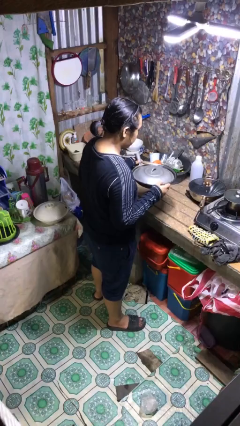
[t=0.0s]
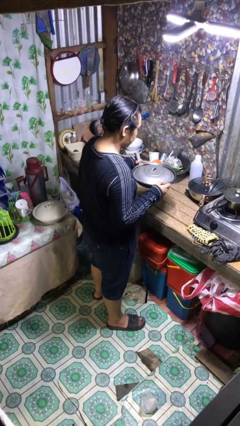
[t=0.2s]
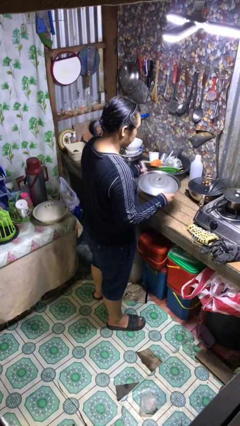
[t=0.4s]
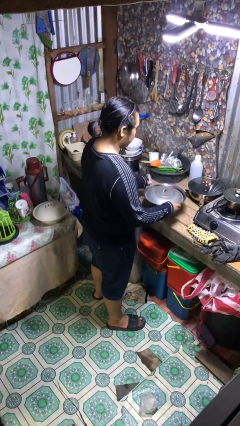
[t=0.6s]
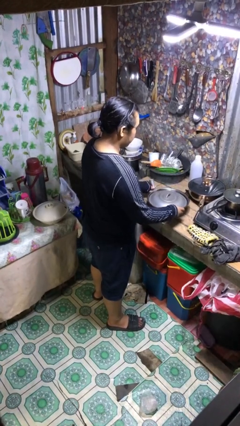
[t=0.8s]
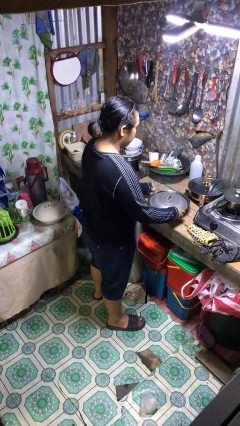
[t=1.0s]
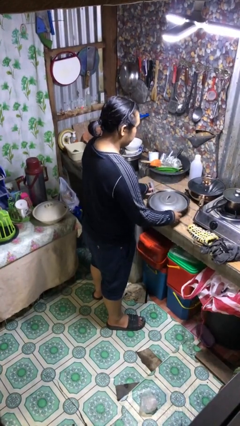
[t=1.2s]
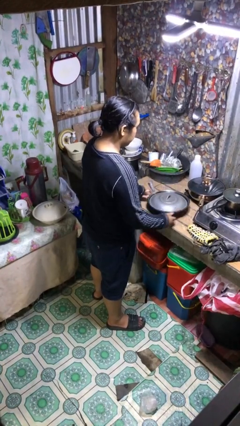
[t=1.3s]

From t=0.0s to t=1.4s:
person puts down object on countertop

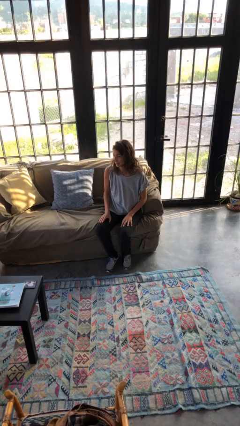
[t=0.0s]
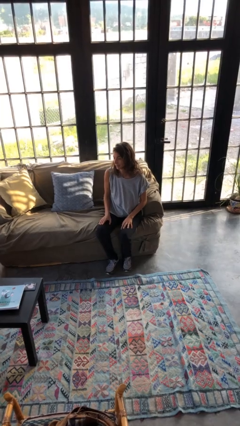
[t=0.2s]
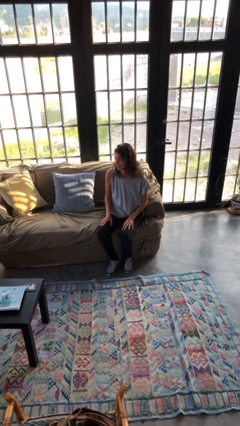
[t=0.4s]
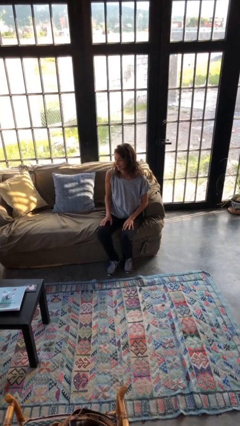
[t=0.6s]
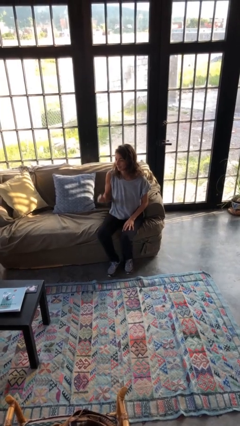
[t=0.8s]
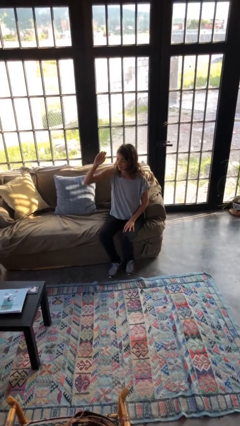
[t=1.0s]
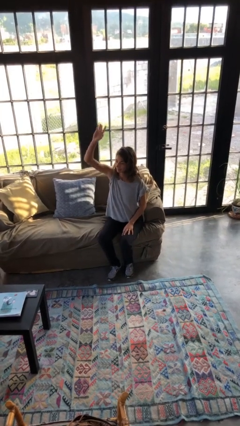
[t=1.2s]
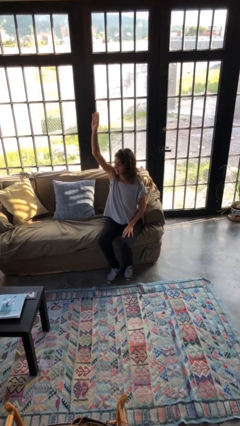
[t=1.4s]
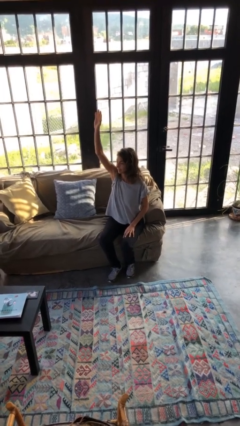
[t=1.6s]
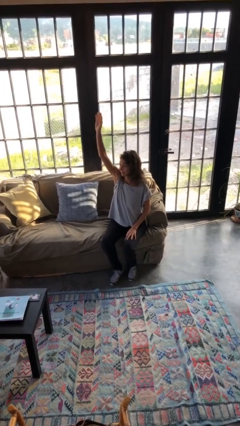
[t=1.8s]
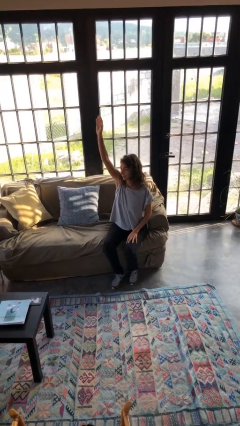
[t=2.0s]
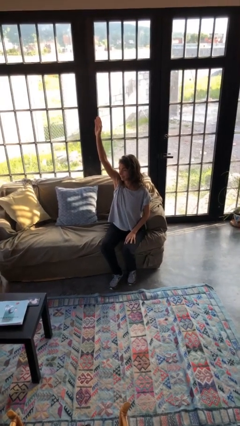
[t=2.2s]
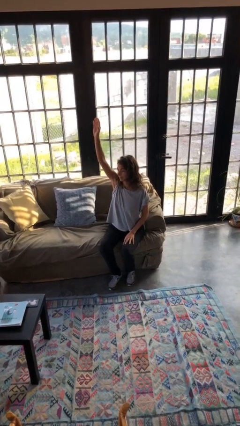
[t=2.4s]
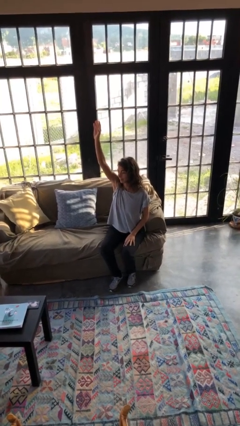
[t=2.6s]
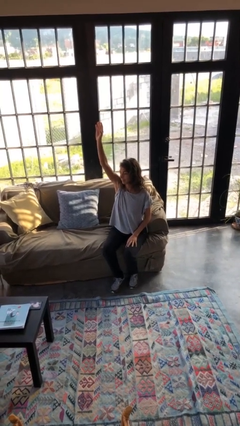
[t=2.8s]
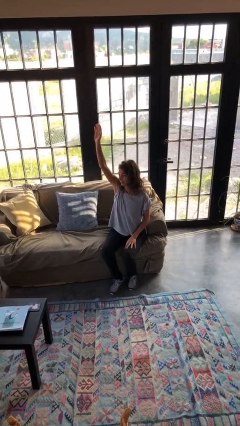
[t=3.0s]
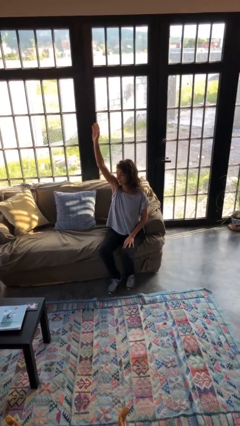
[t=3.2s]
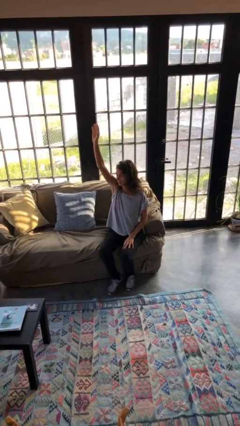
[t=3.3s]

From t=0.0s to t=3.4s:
person gestures raise hand

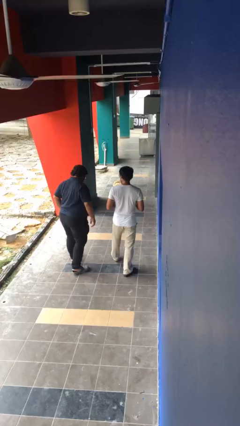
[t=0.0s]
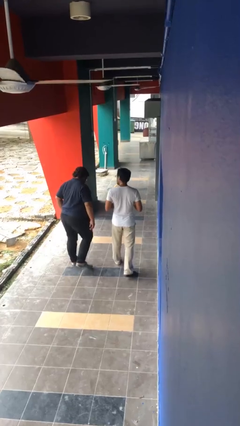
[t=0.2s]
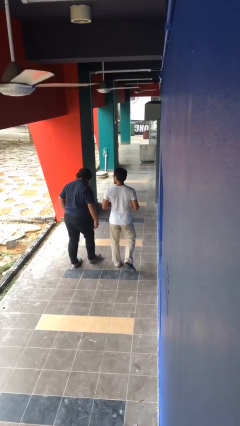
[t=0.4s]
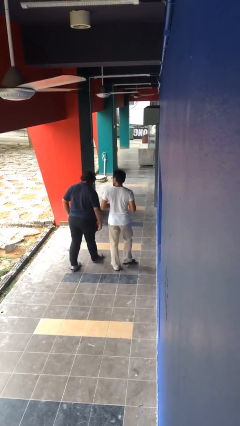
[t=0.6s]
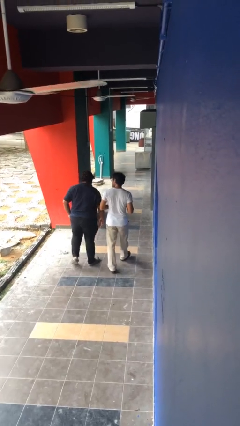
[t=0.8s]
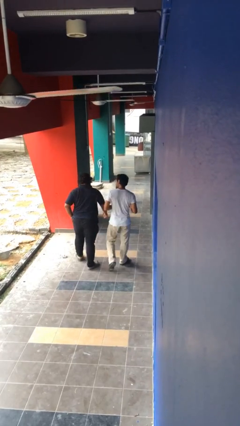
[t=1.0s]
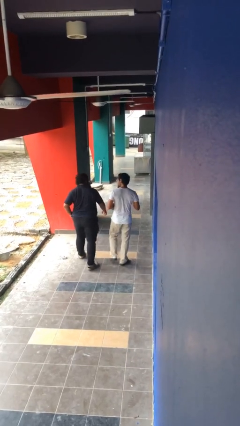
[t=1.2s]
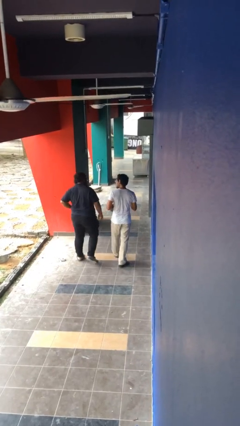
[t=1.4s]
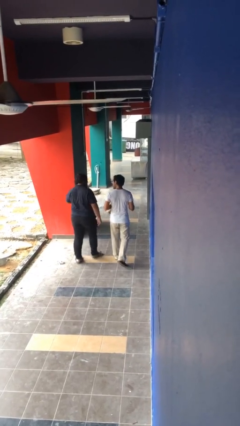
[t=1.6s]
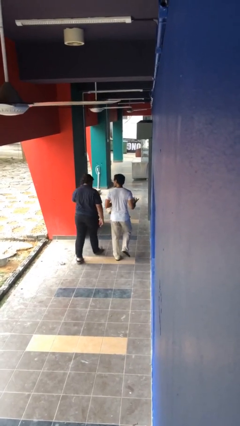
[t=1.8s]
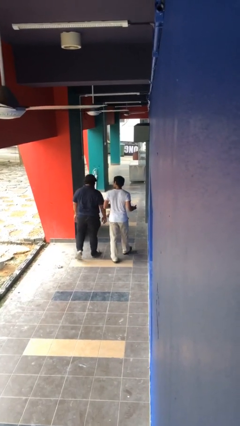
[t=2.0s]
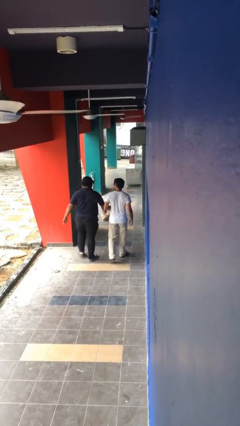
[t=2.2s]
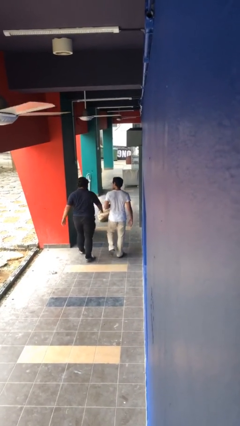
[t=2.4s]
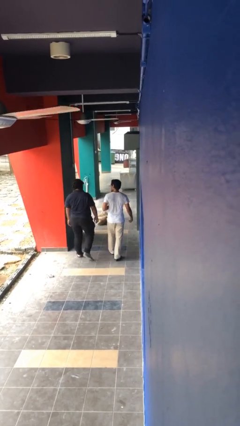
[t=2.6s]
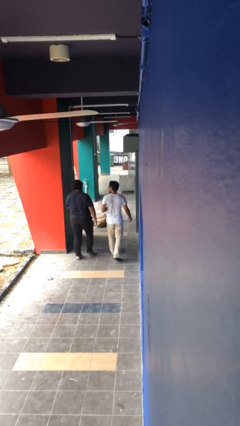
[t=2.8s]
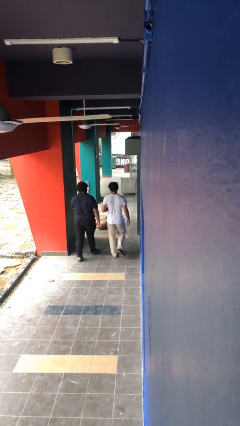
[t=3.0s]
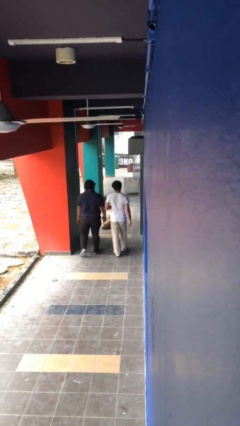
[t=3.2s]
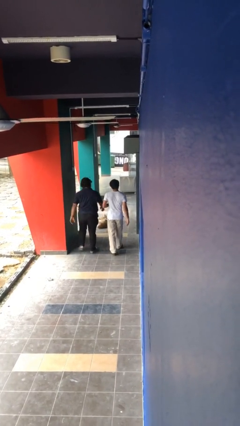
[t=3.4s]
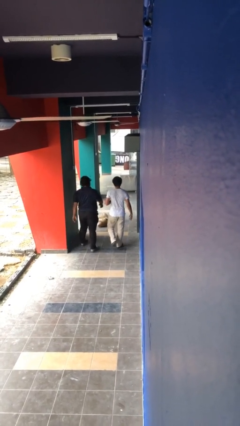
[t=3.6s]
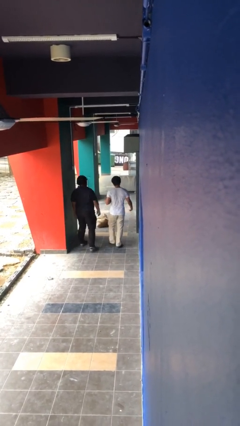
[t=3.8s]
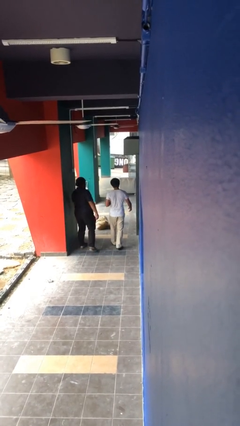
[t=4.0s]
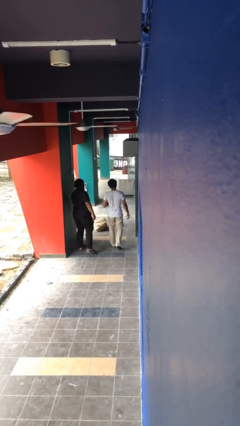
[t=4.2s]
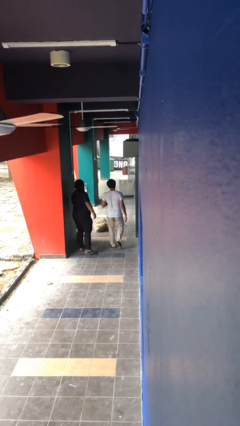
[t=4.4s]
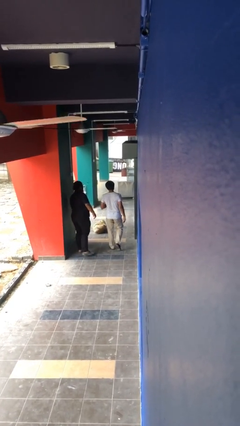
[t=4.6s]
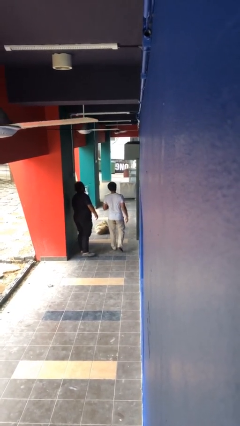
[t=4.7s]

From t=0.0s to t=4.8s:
person talks to person

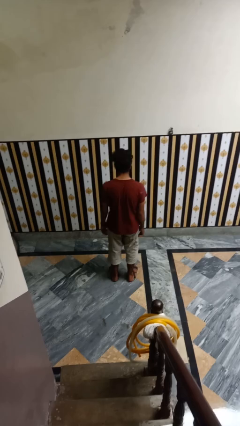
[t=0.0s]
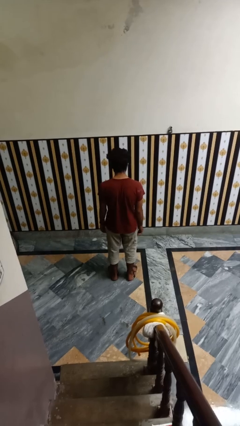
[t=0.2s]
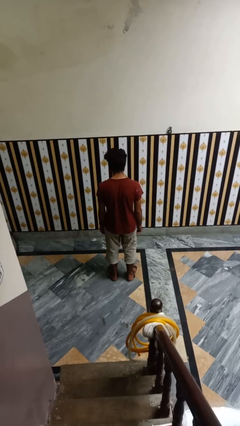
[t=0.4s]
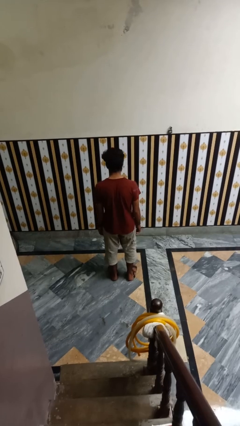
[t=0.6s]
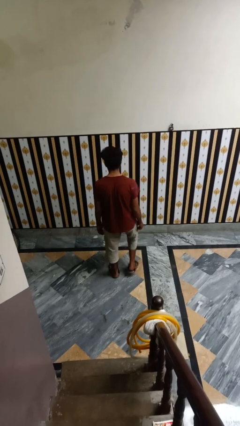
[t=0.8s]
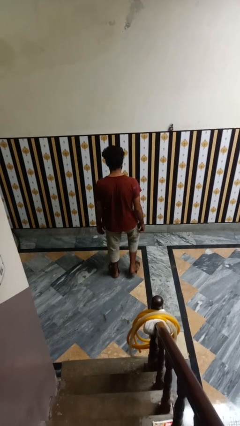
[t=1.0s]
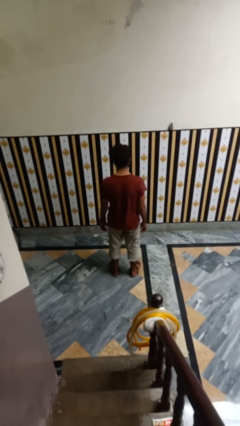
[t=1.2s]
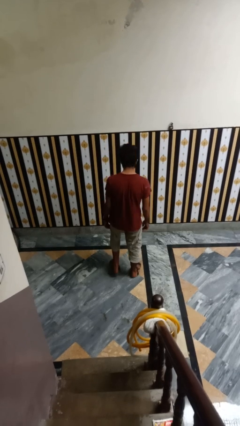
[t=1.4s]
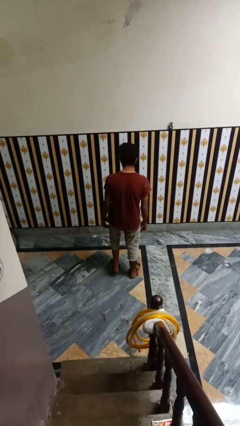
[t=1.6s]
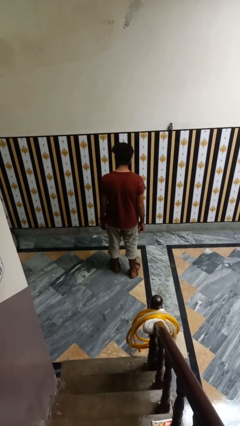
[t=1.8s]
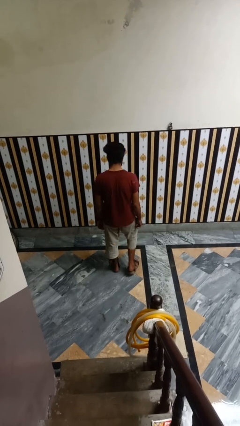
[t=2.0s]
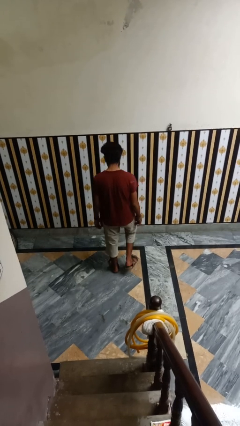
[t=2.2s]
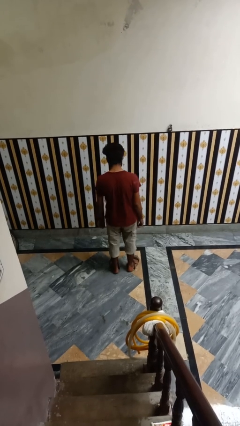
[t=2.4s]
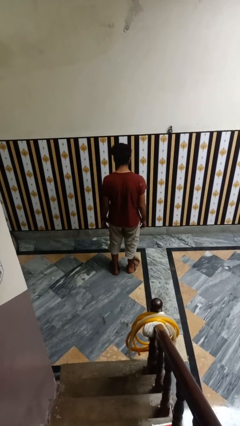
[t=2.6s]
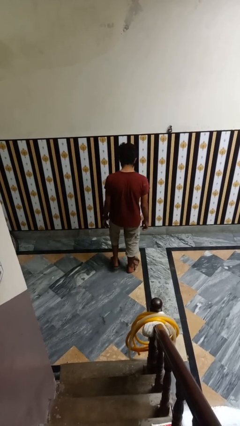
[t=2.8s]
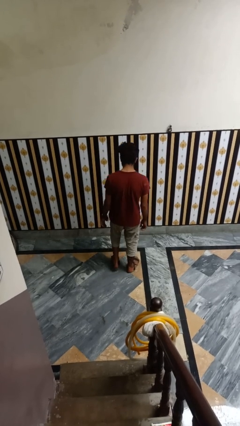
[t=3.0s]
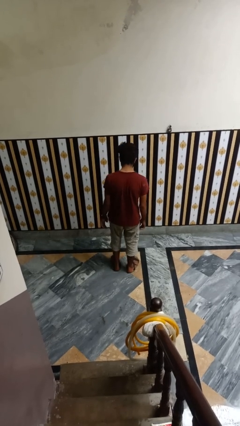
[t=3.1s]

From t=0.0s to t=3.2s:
person walks tiptoe

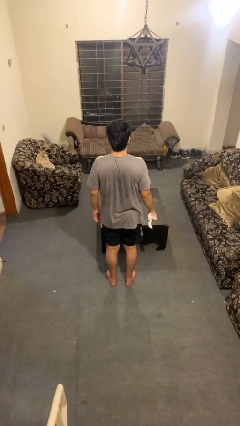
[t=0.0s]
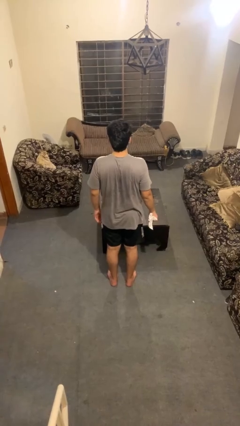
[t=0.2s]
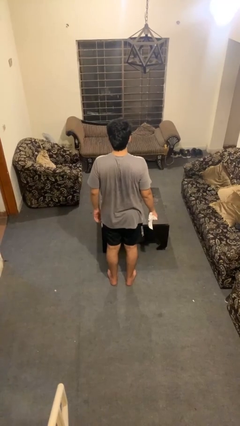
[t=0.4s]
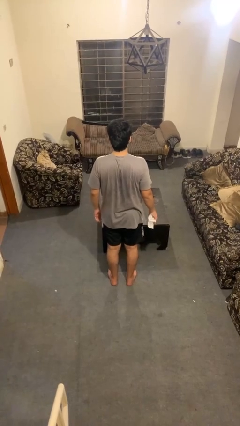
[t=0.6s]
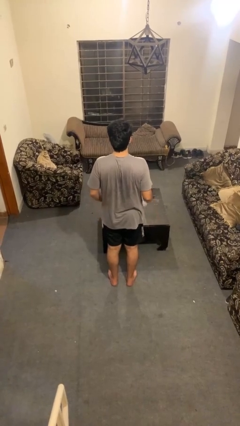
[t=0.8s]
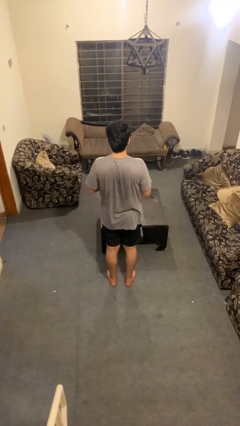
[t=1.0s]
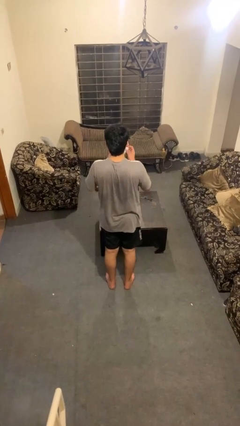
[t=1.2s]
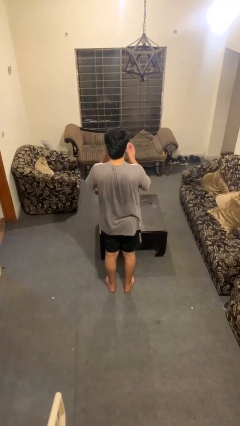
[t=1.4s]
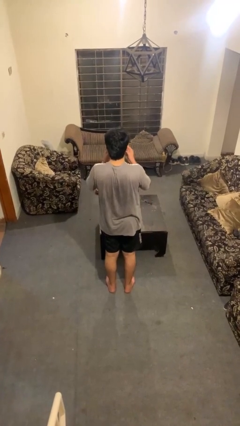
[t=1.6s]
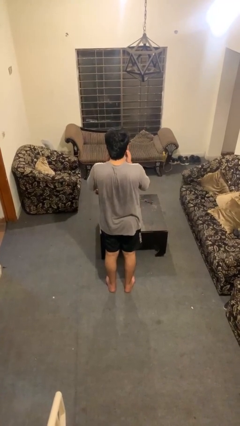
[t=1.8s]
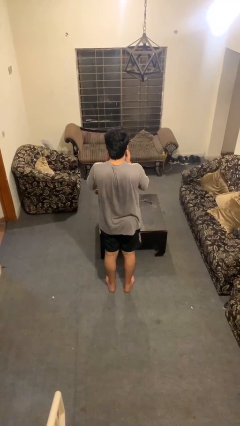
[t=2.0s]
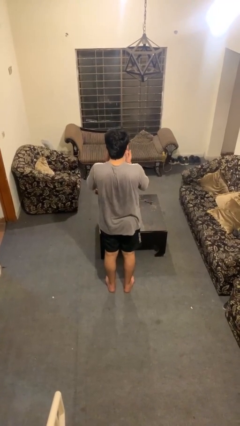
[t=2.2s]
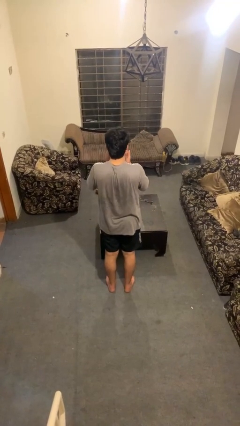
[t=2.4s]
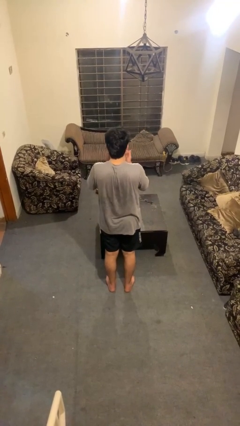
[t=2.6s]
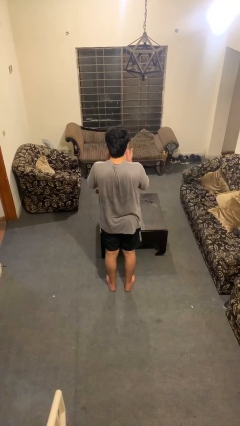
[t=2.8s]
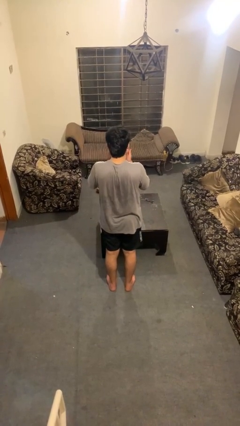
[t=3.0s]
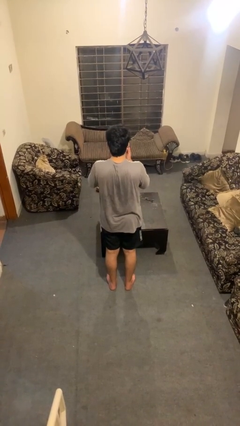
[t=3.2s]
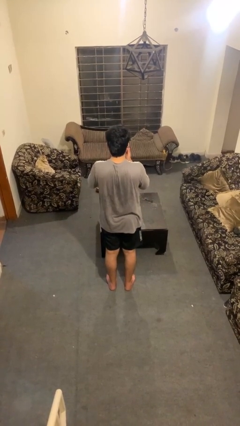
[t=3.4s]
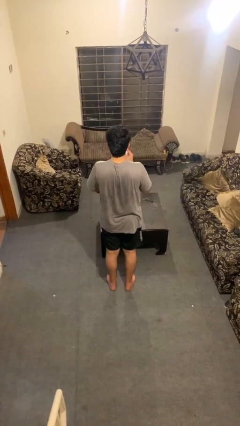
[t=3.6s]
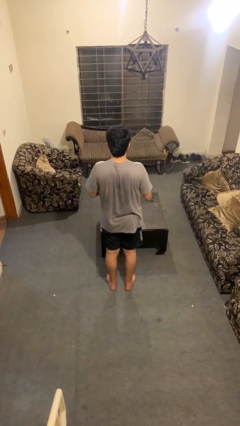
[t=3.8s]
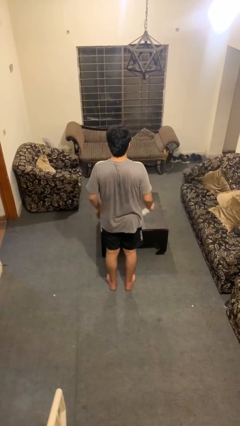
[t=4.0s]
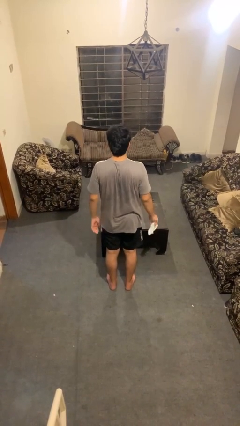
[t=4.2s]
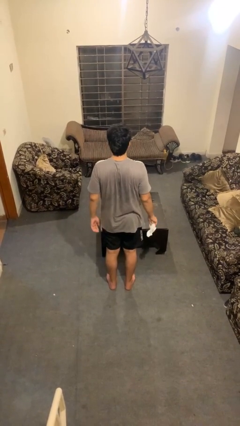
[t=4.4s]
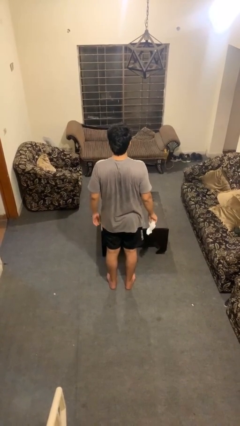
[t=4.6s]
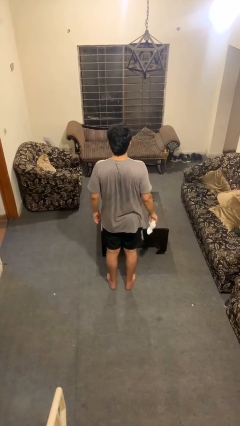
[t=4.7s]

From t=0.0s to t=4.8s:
person blows nose
